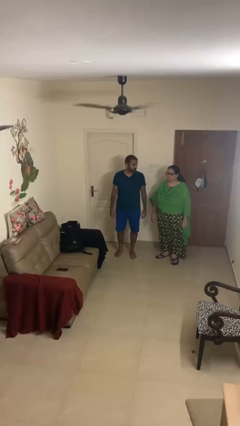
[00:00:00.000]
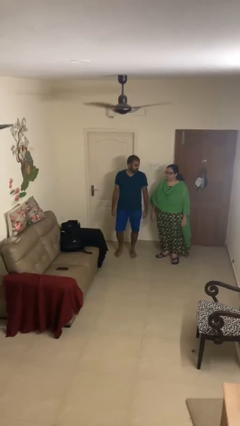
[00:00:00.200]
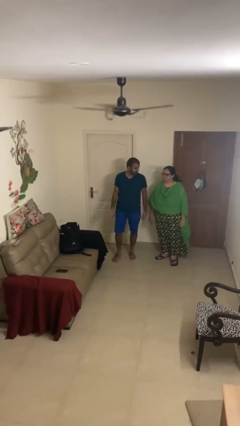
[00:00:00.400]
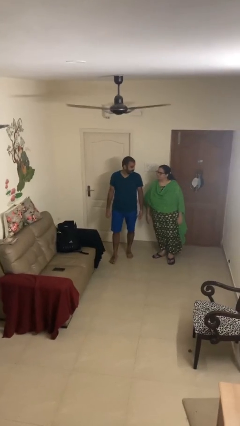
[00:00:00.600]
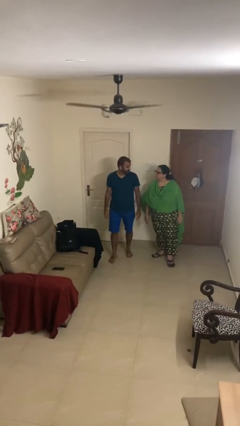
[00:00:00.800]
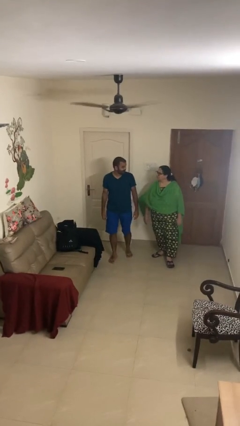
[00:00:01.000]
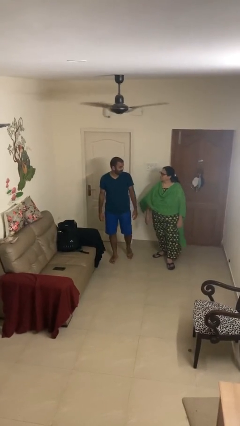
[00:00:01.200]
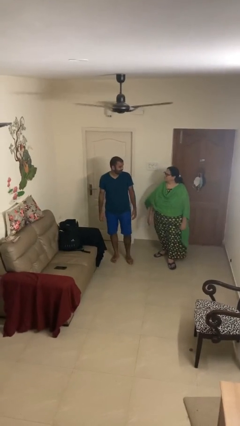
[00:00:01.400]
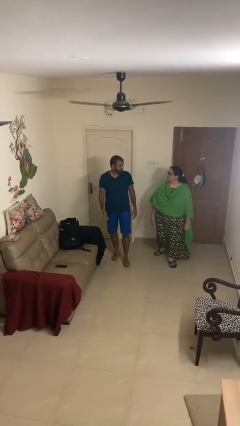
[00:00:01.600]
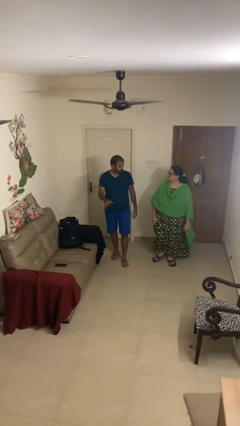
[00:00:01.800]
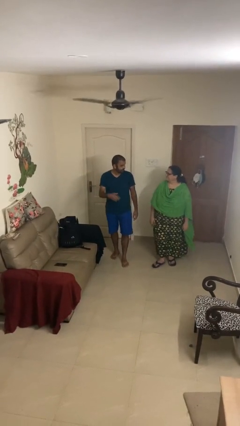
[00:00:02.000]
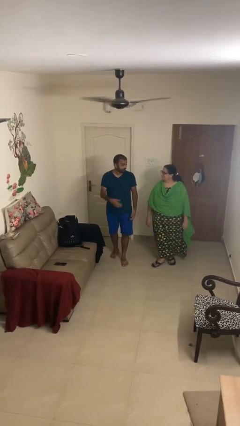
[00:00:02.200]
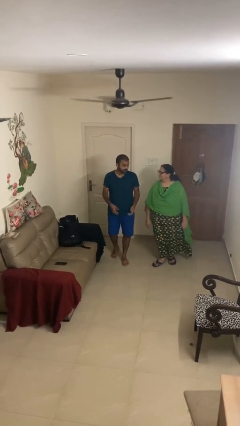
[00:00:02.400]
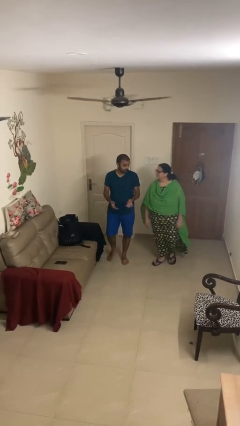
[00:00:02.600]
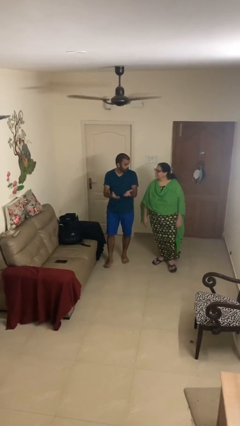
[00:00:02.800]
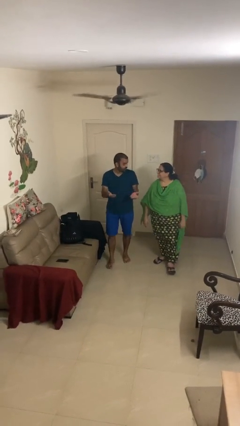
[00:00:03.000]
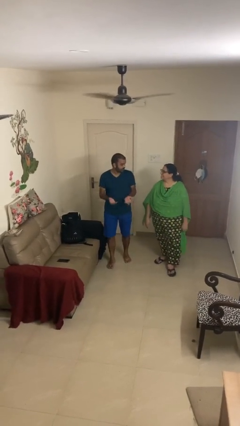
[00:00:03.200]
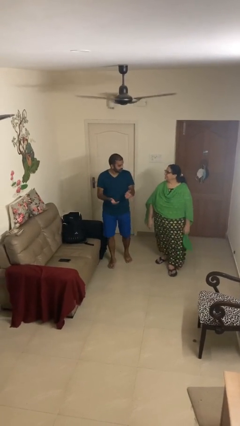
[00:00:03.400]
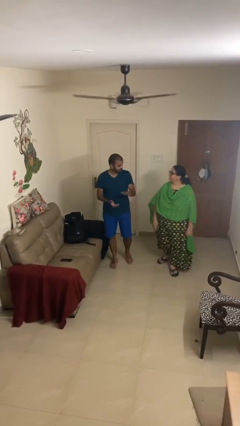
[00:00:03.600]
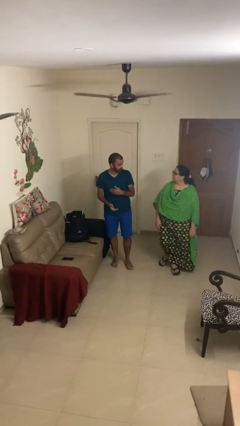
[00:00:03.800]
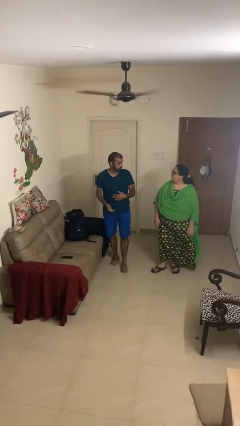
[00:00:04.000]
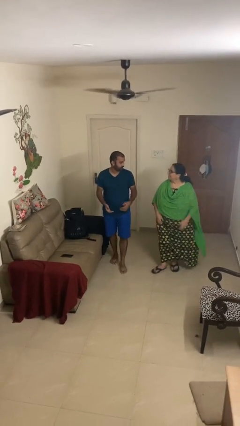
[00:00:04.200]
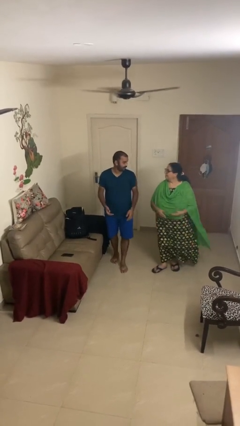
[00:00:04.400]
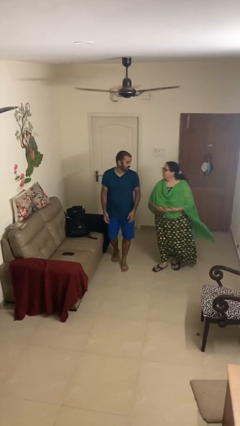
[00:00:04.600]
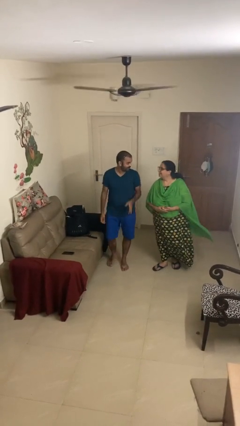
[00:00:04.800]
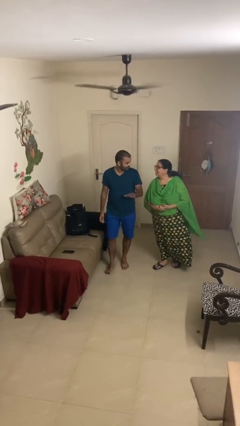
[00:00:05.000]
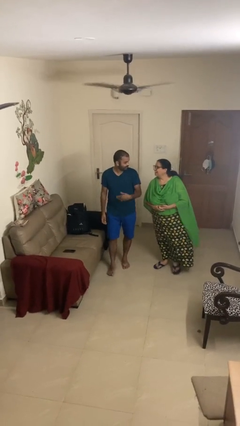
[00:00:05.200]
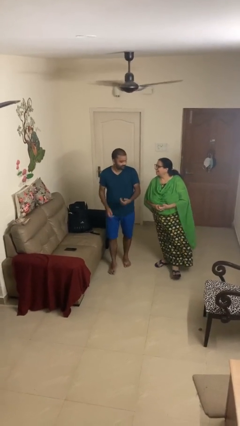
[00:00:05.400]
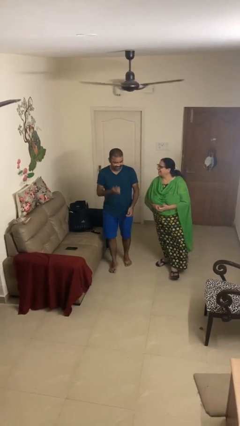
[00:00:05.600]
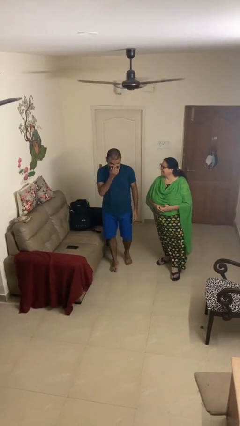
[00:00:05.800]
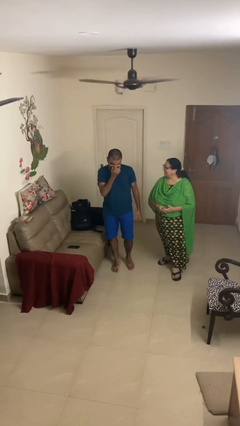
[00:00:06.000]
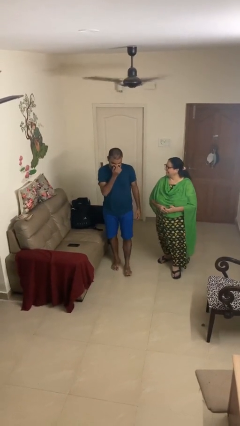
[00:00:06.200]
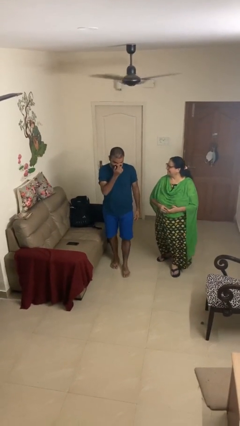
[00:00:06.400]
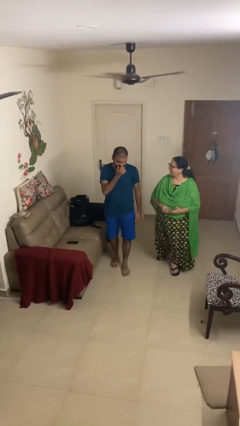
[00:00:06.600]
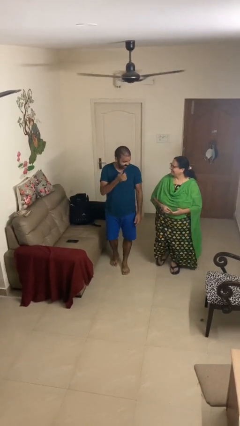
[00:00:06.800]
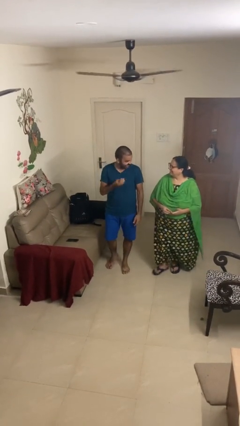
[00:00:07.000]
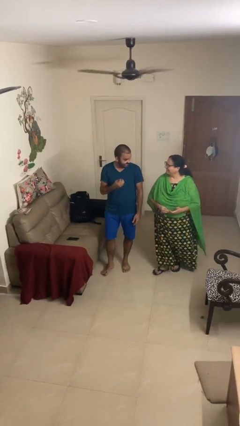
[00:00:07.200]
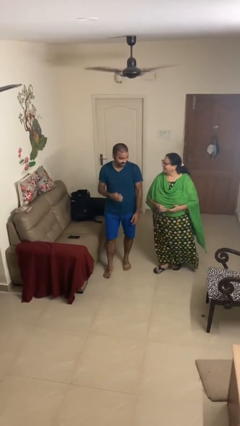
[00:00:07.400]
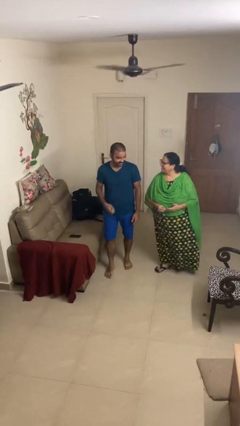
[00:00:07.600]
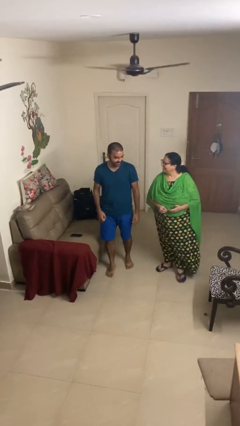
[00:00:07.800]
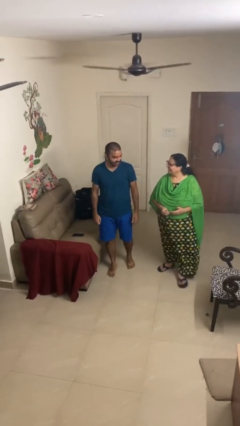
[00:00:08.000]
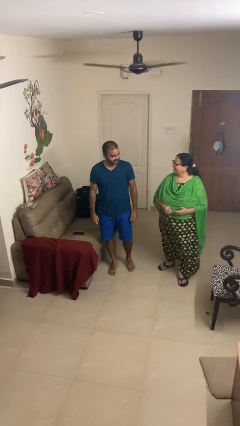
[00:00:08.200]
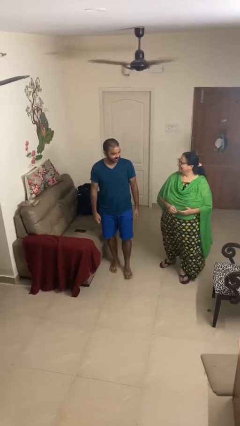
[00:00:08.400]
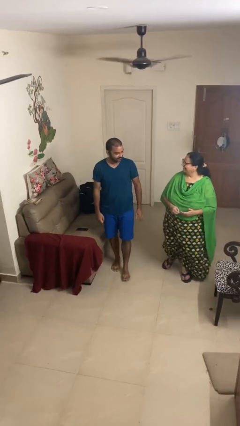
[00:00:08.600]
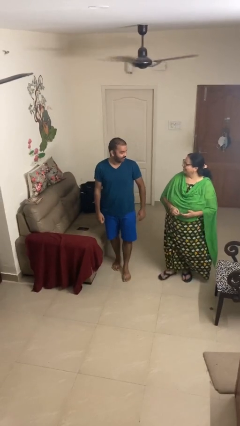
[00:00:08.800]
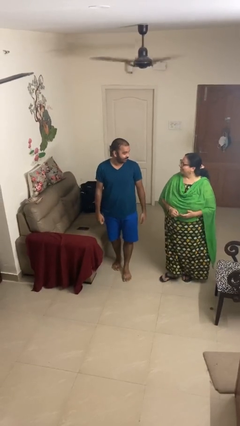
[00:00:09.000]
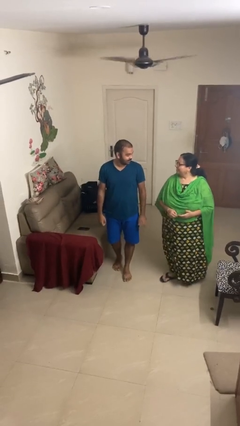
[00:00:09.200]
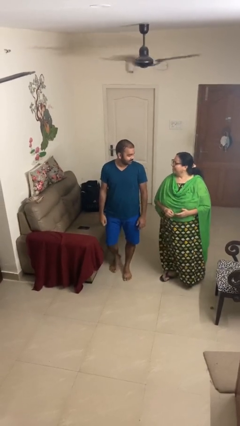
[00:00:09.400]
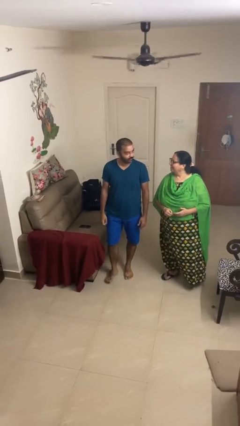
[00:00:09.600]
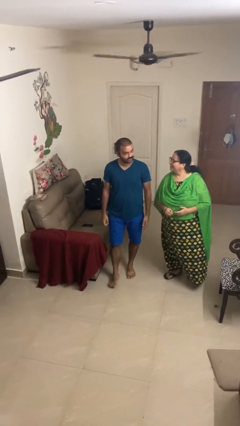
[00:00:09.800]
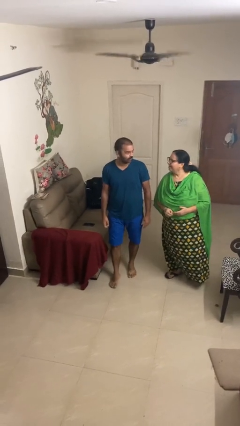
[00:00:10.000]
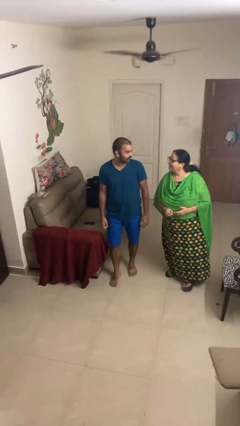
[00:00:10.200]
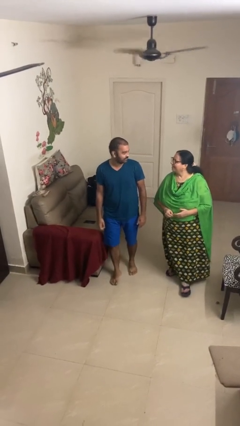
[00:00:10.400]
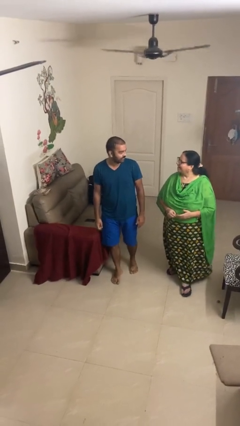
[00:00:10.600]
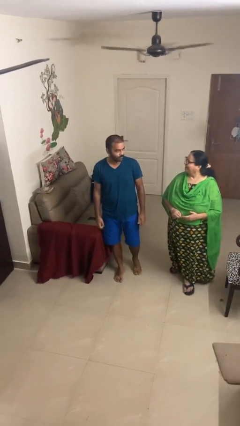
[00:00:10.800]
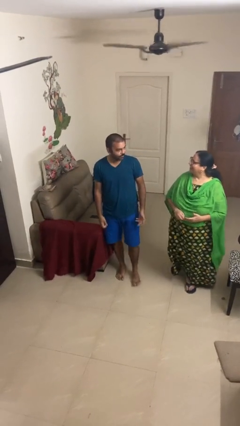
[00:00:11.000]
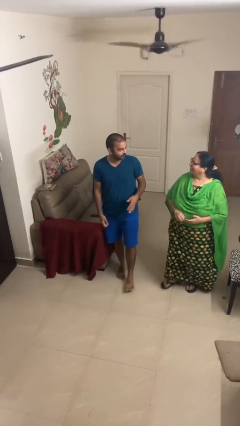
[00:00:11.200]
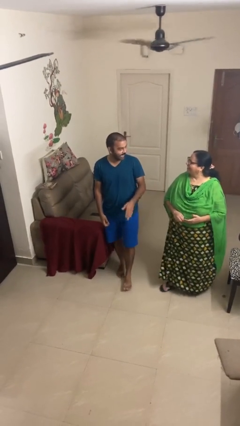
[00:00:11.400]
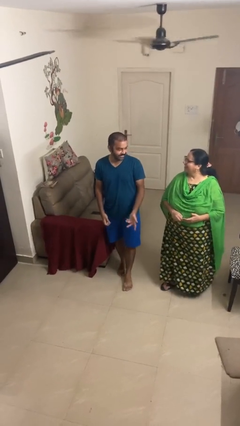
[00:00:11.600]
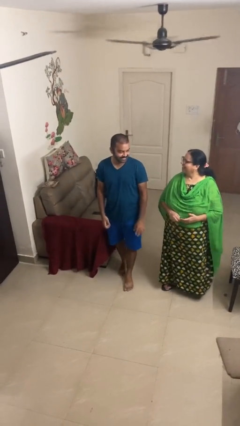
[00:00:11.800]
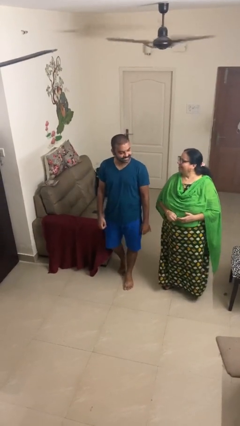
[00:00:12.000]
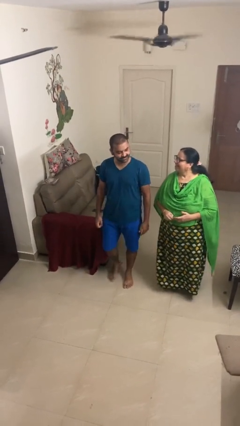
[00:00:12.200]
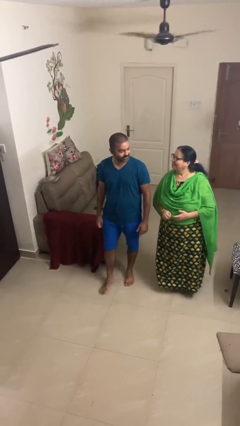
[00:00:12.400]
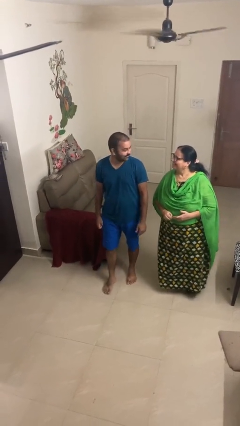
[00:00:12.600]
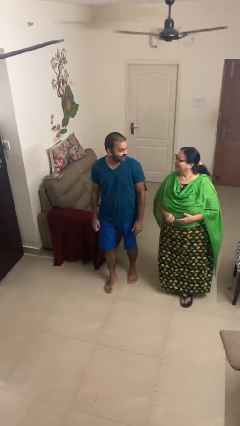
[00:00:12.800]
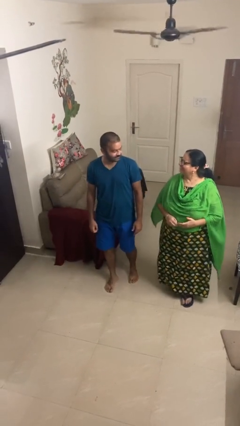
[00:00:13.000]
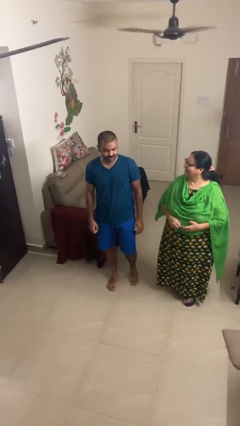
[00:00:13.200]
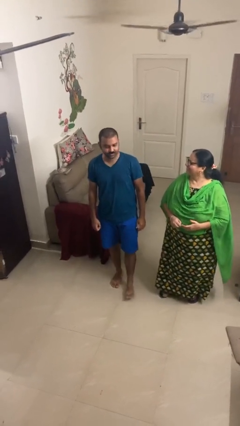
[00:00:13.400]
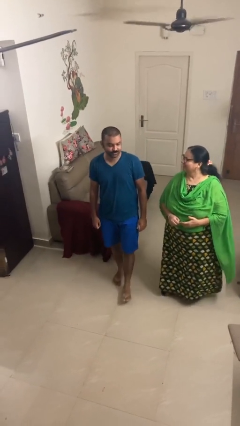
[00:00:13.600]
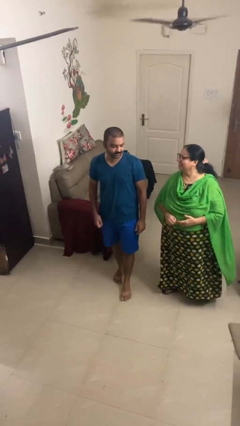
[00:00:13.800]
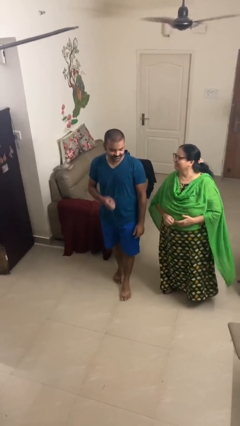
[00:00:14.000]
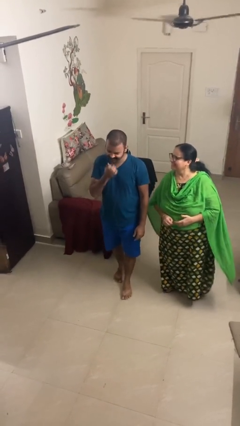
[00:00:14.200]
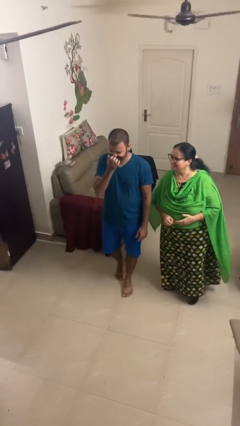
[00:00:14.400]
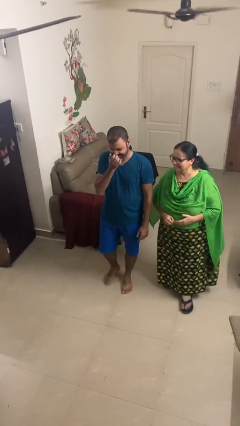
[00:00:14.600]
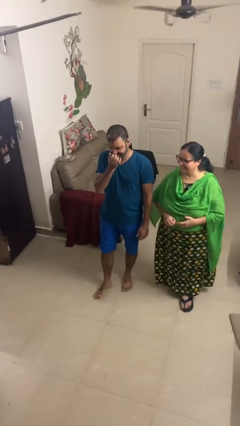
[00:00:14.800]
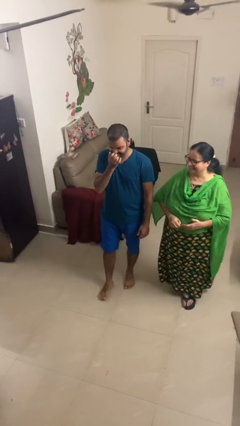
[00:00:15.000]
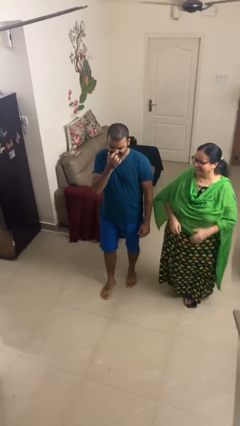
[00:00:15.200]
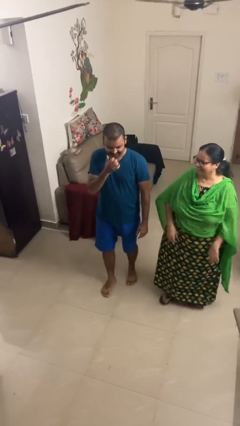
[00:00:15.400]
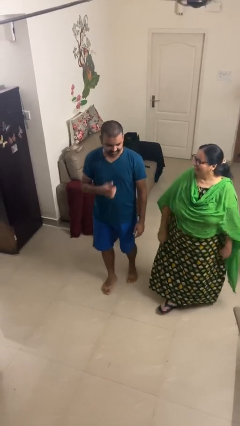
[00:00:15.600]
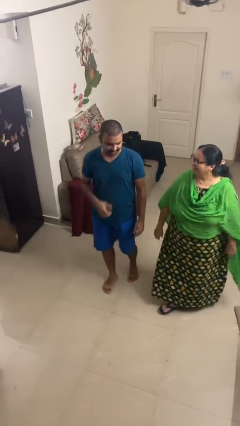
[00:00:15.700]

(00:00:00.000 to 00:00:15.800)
person talks to person

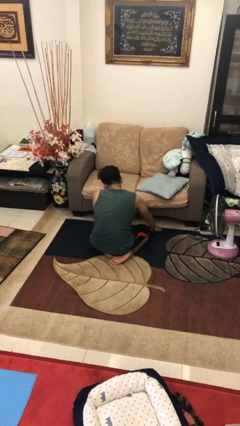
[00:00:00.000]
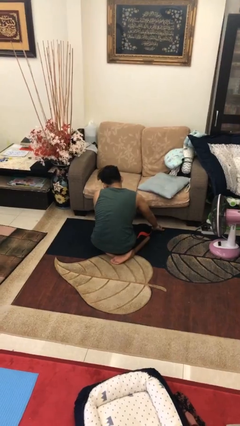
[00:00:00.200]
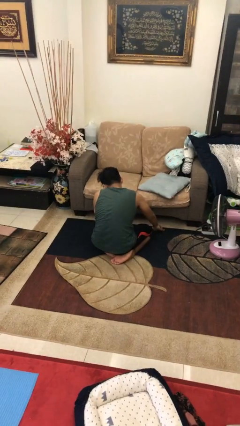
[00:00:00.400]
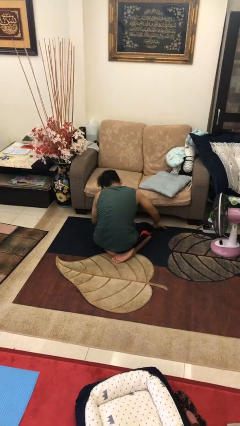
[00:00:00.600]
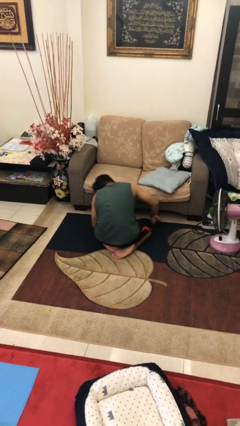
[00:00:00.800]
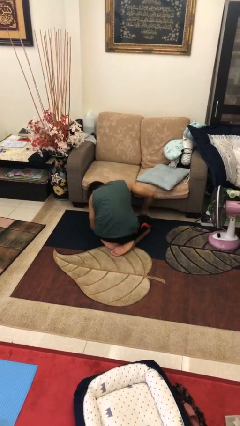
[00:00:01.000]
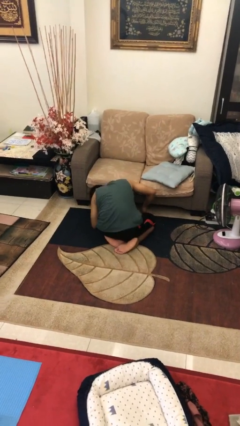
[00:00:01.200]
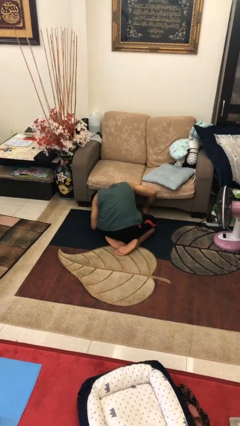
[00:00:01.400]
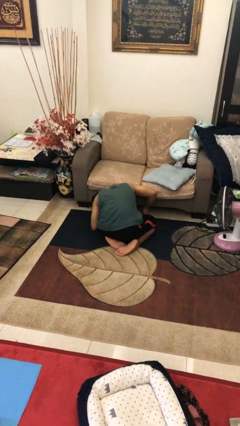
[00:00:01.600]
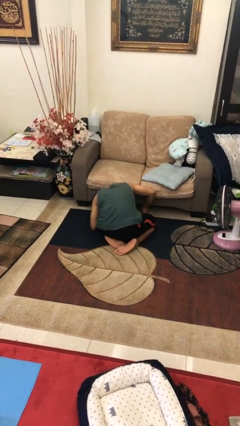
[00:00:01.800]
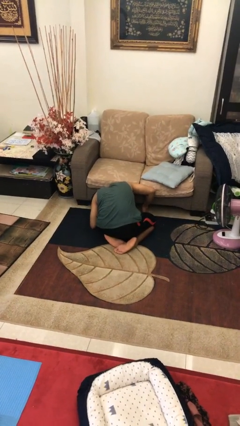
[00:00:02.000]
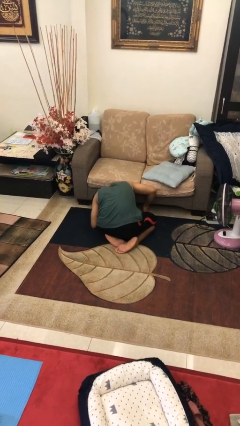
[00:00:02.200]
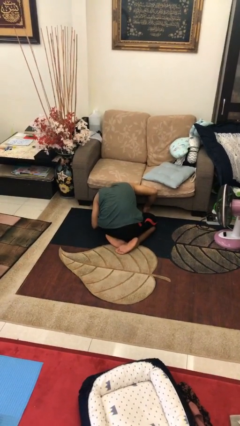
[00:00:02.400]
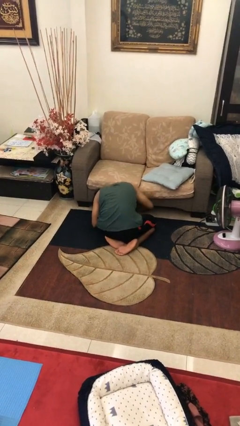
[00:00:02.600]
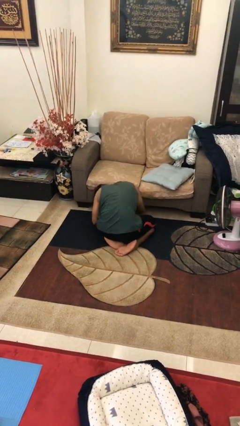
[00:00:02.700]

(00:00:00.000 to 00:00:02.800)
person searches under couch
